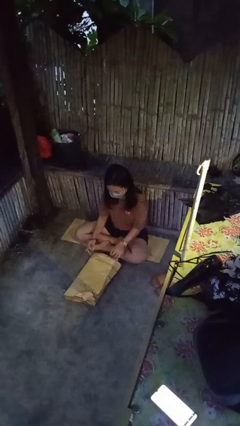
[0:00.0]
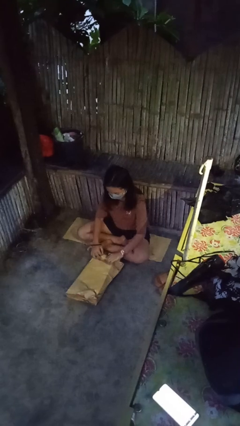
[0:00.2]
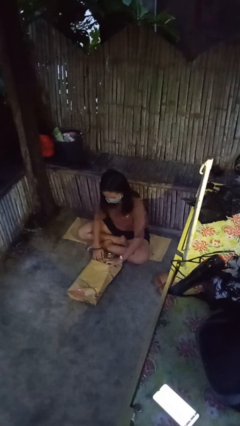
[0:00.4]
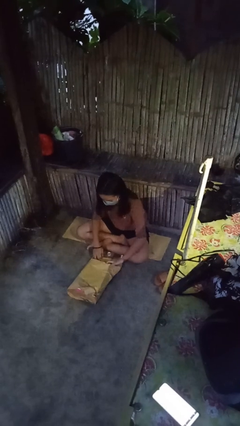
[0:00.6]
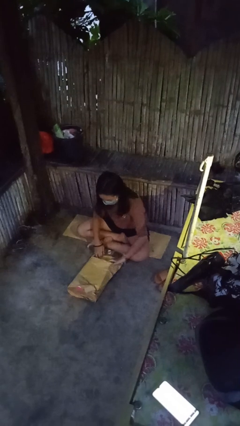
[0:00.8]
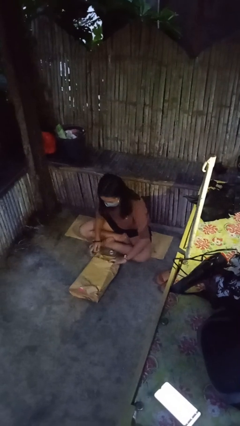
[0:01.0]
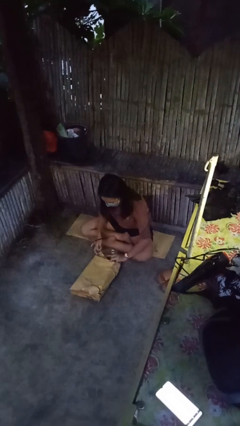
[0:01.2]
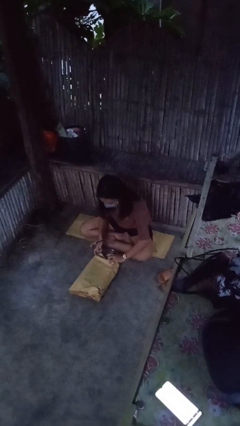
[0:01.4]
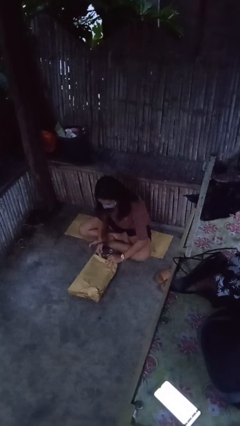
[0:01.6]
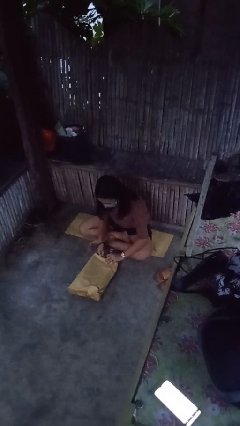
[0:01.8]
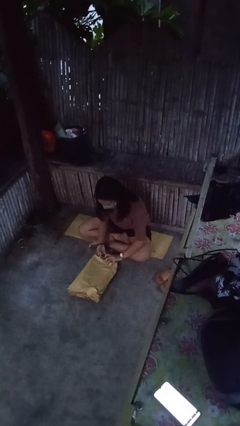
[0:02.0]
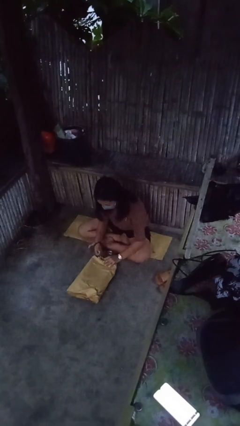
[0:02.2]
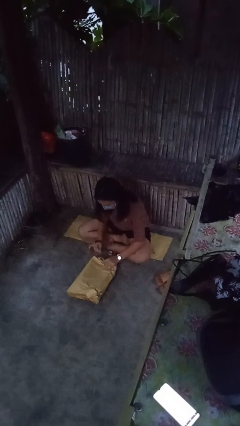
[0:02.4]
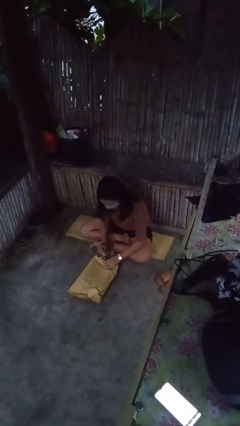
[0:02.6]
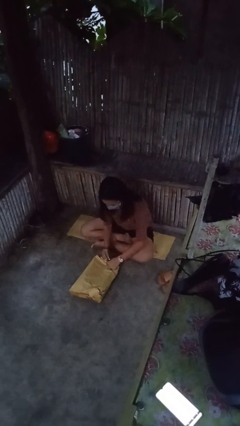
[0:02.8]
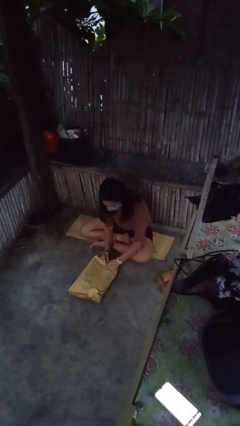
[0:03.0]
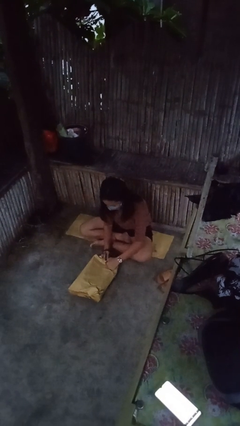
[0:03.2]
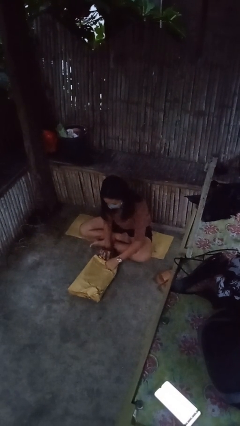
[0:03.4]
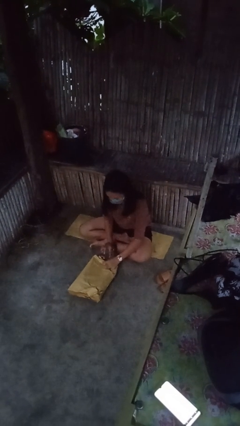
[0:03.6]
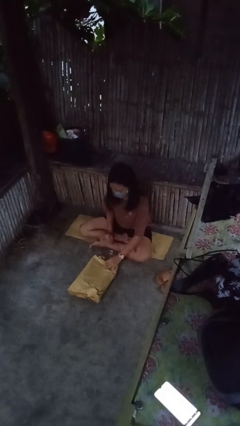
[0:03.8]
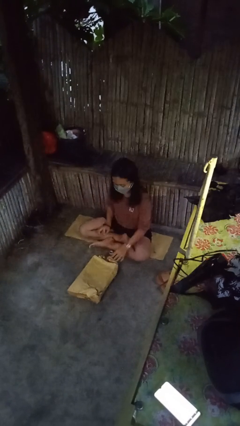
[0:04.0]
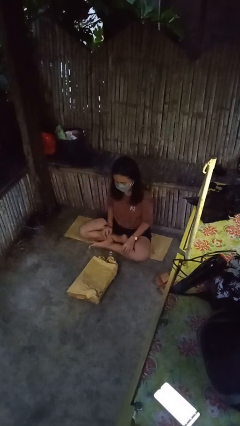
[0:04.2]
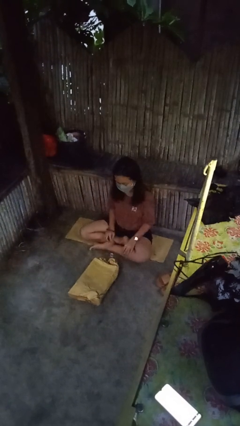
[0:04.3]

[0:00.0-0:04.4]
person wraps box

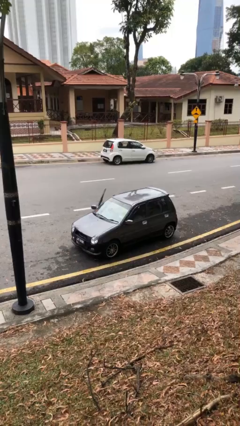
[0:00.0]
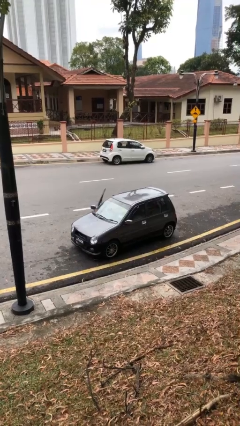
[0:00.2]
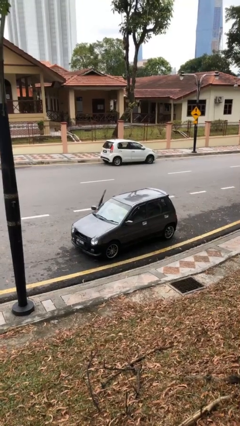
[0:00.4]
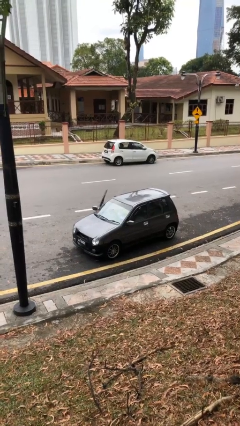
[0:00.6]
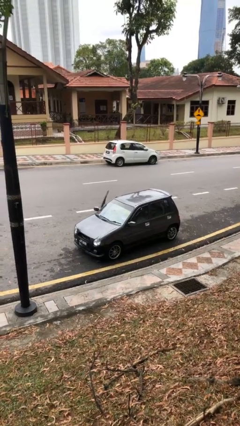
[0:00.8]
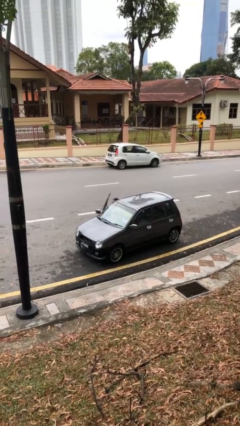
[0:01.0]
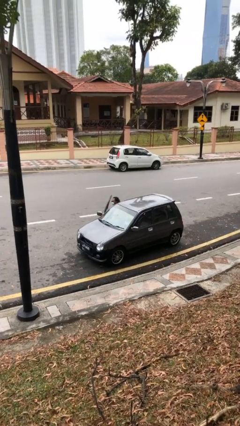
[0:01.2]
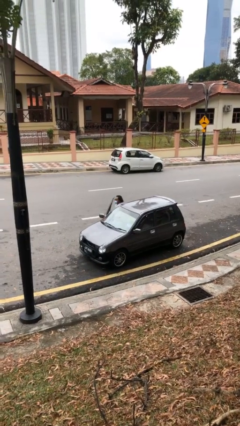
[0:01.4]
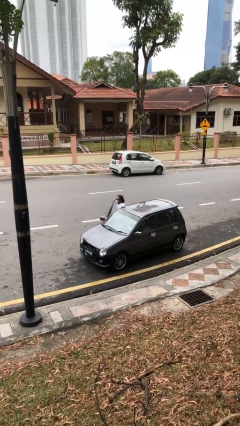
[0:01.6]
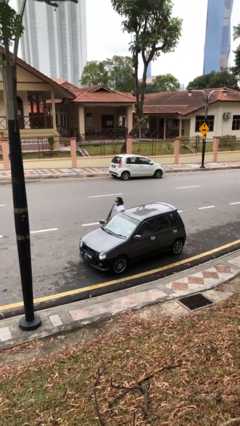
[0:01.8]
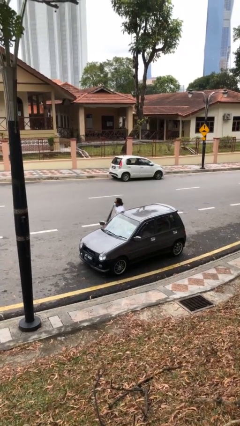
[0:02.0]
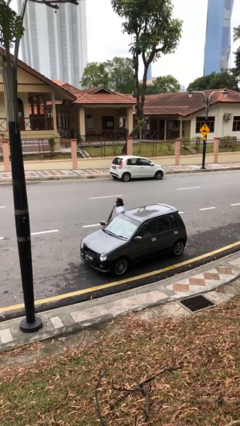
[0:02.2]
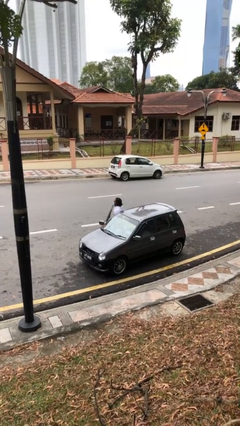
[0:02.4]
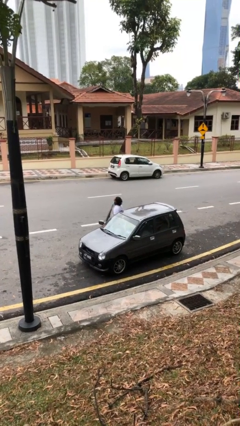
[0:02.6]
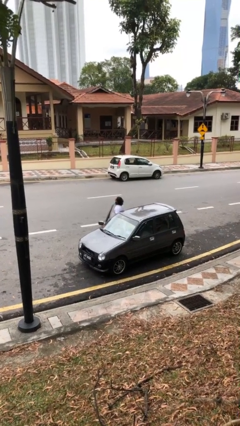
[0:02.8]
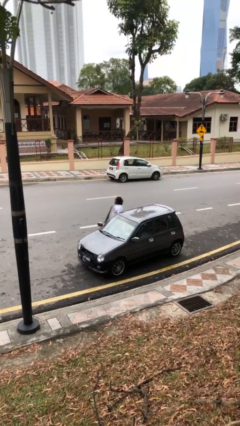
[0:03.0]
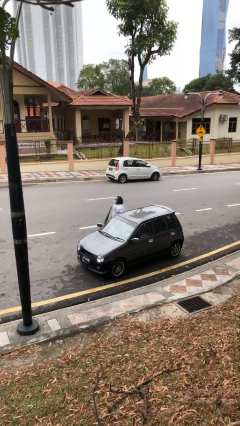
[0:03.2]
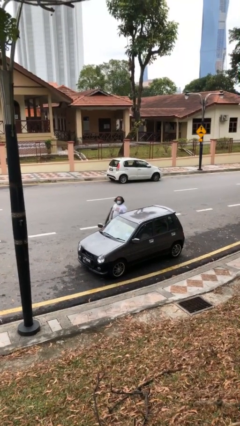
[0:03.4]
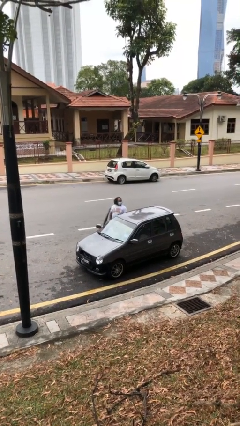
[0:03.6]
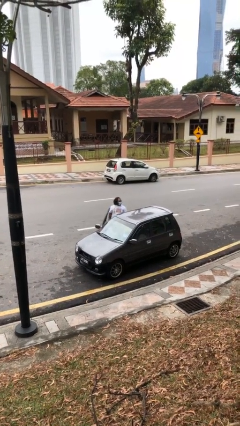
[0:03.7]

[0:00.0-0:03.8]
person exits car

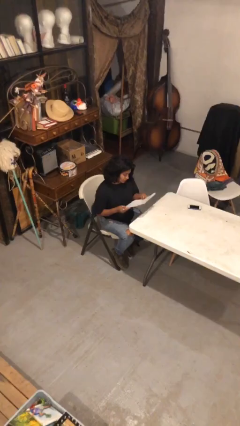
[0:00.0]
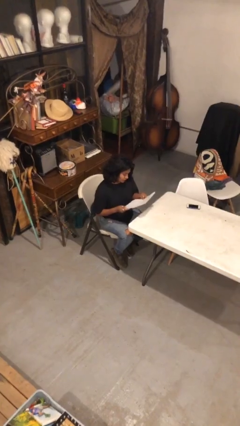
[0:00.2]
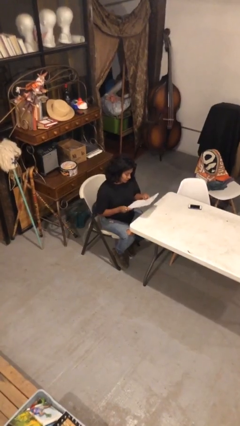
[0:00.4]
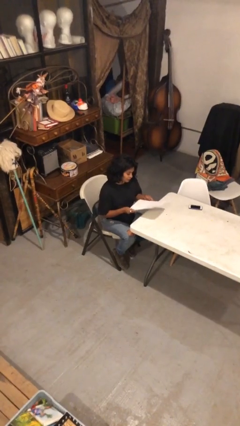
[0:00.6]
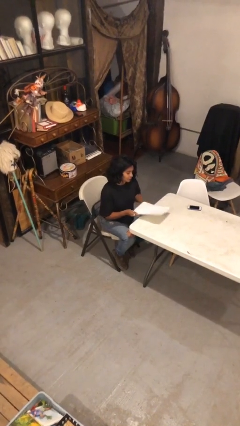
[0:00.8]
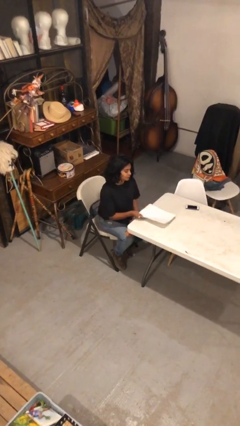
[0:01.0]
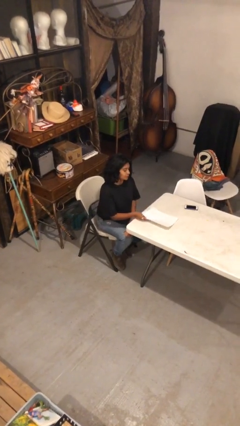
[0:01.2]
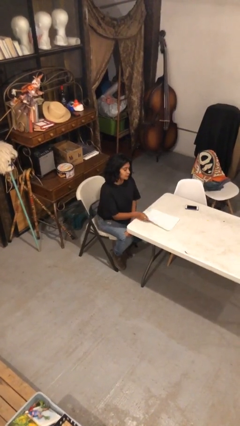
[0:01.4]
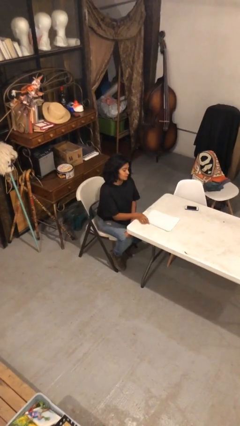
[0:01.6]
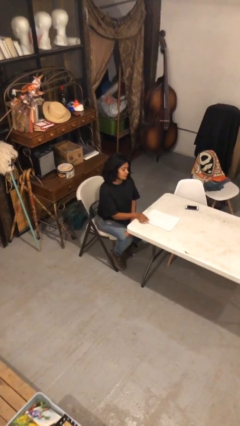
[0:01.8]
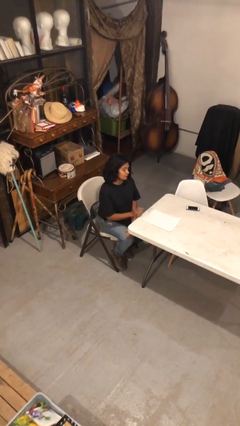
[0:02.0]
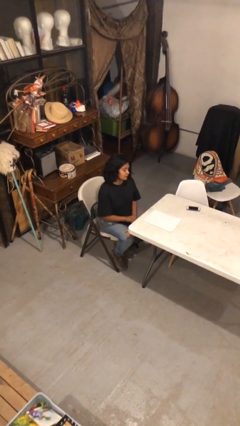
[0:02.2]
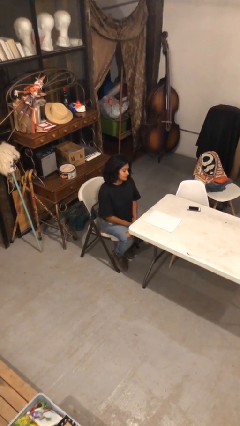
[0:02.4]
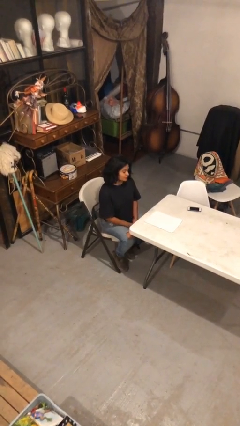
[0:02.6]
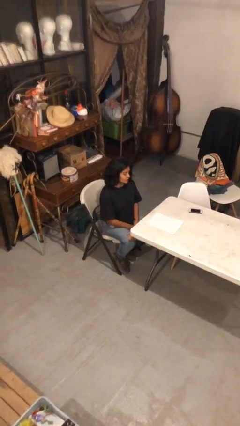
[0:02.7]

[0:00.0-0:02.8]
person puts down object on table

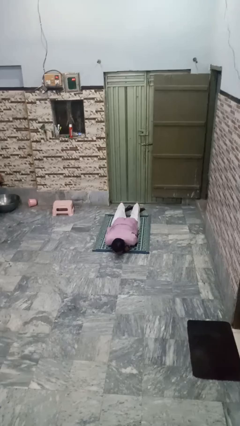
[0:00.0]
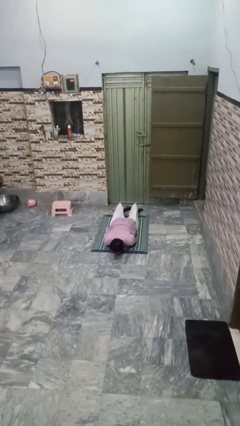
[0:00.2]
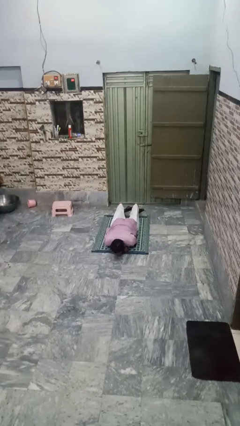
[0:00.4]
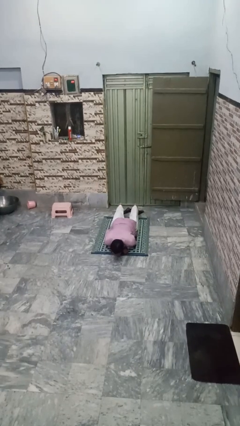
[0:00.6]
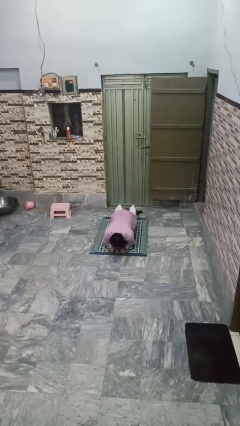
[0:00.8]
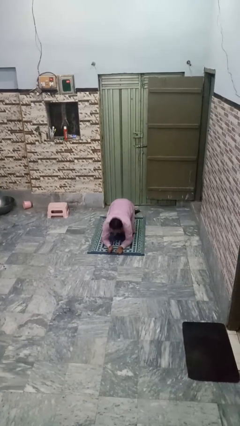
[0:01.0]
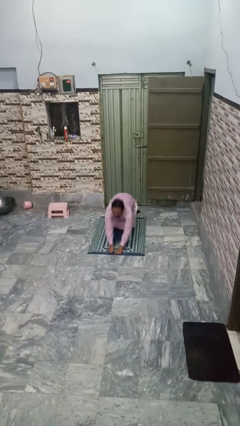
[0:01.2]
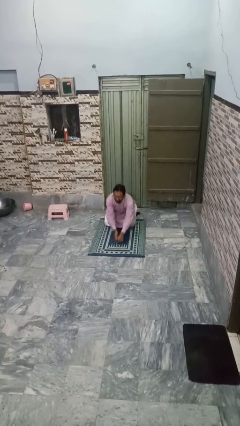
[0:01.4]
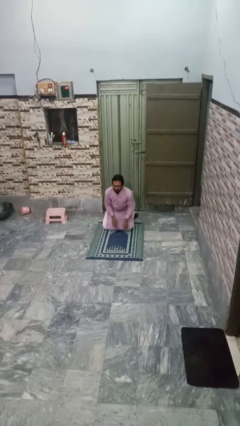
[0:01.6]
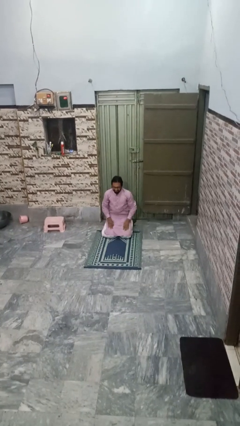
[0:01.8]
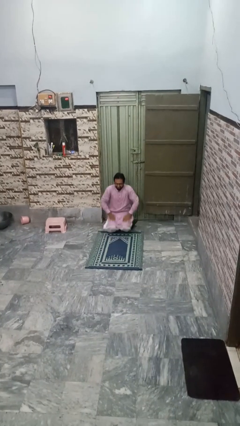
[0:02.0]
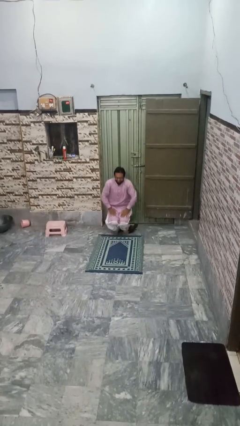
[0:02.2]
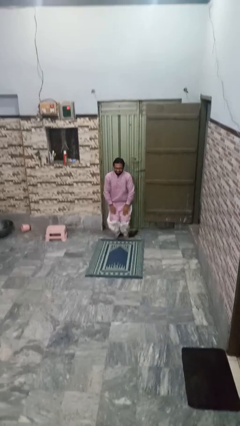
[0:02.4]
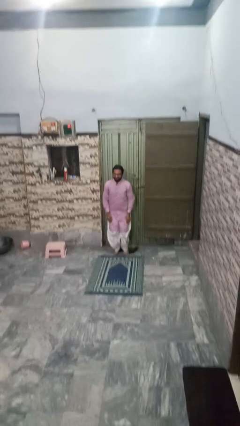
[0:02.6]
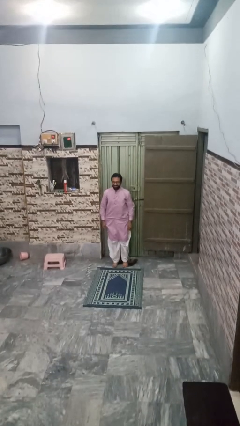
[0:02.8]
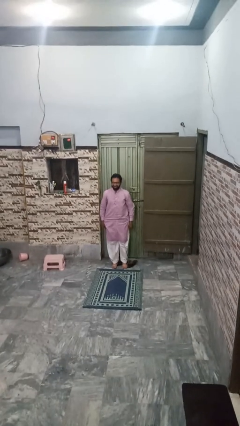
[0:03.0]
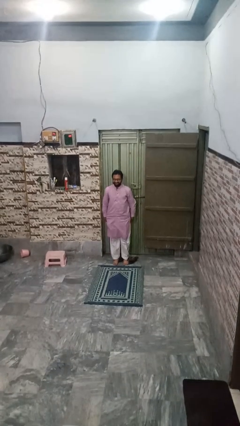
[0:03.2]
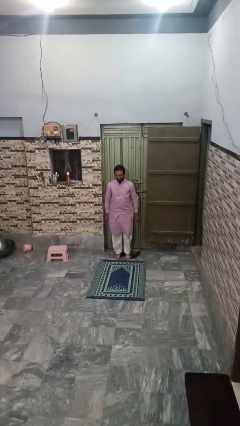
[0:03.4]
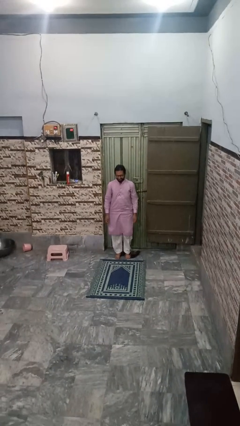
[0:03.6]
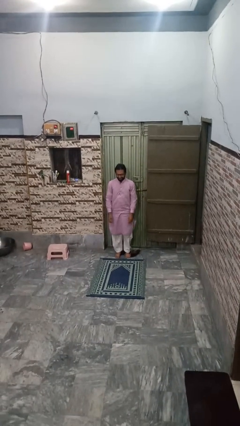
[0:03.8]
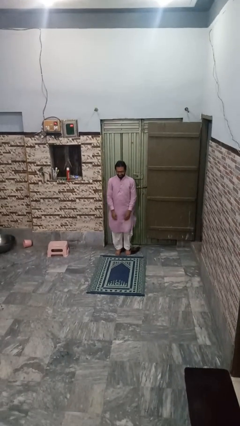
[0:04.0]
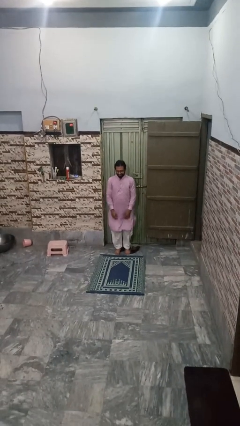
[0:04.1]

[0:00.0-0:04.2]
person stands up from floor

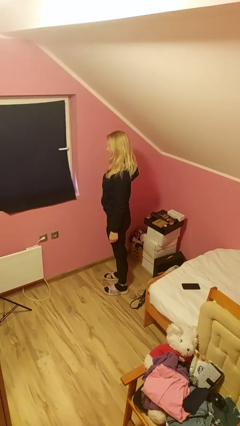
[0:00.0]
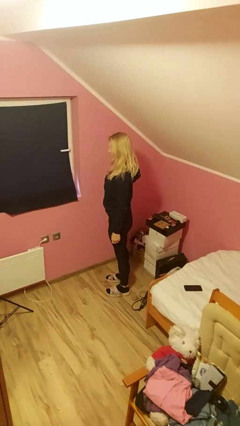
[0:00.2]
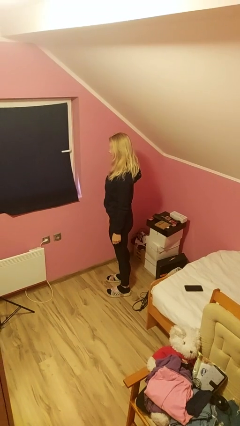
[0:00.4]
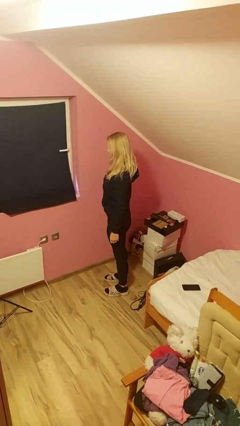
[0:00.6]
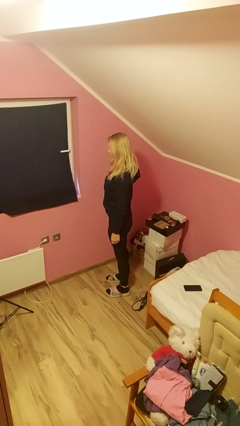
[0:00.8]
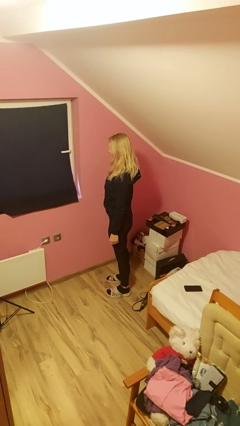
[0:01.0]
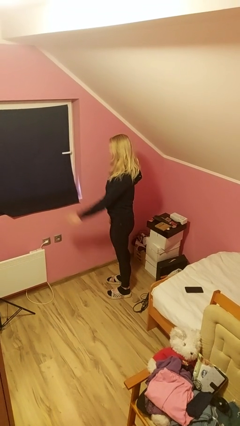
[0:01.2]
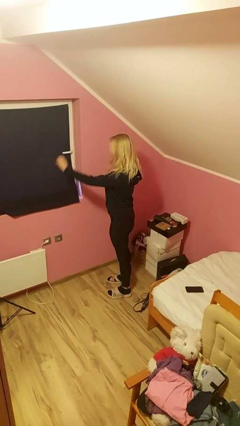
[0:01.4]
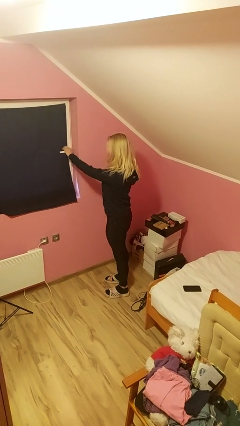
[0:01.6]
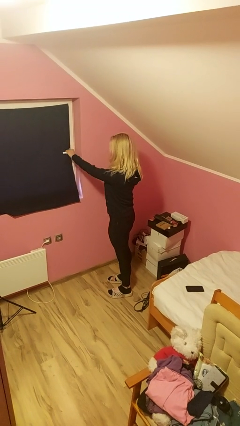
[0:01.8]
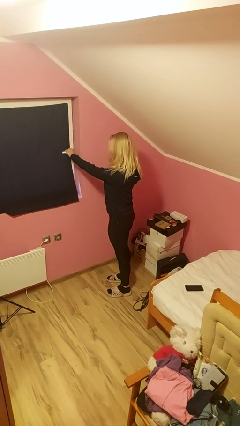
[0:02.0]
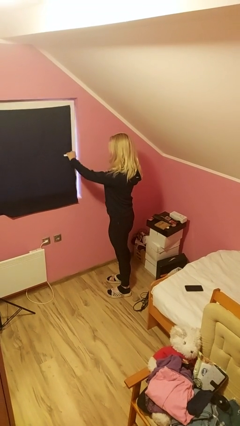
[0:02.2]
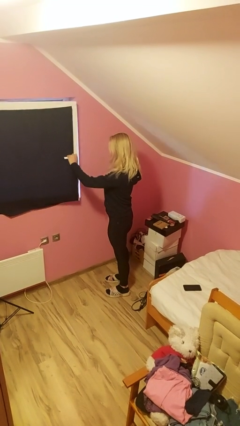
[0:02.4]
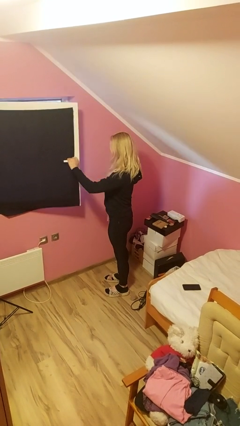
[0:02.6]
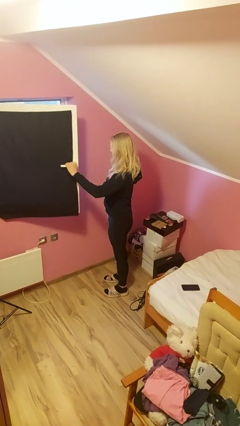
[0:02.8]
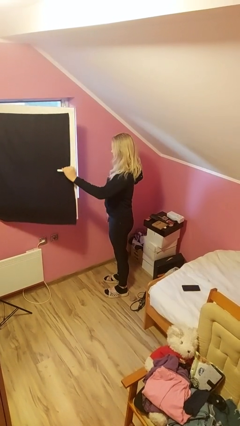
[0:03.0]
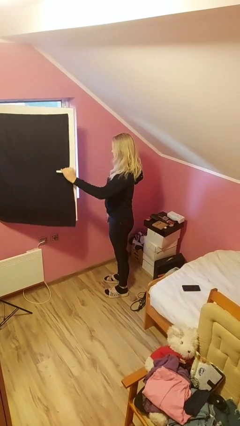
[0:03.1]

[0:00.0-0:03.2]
person opens home window
